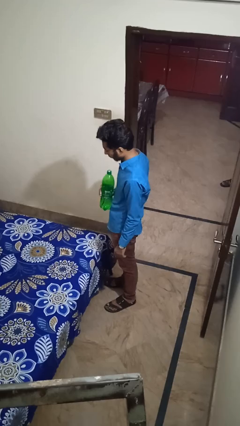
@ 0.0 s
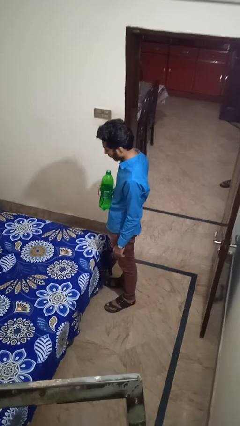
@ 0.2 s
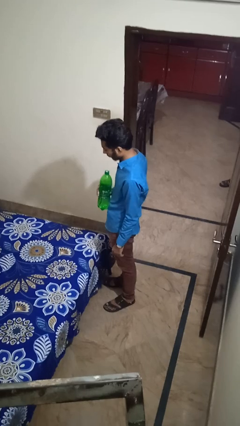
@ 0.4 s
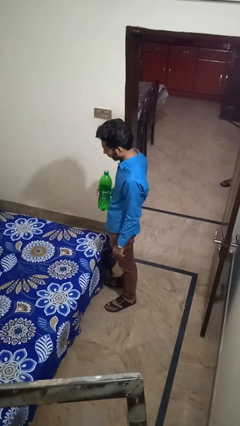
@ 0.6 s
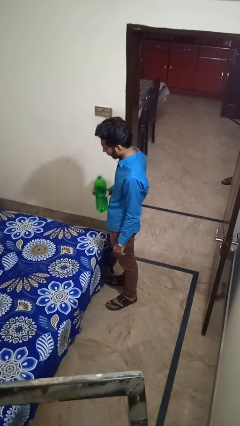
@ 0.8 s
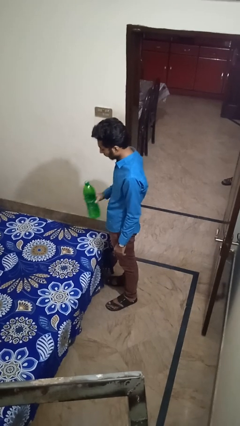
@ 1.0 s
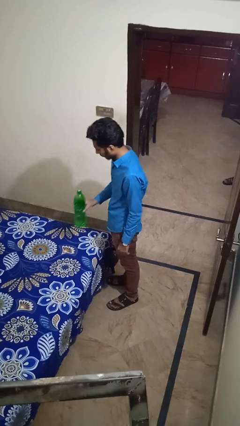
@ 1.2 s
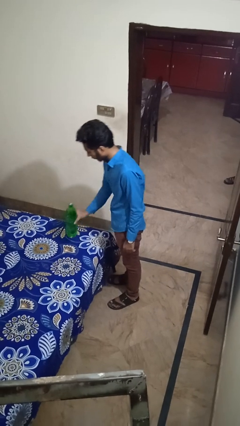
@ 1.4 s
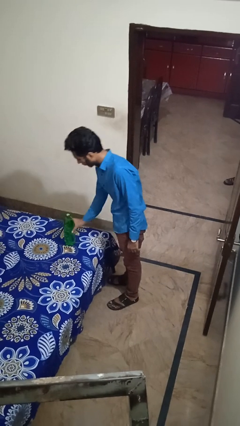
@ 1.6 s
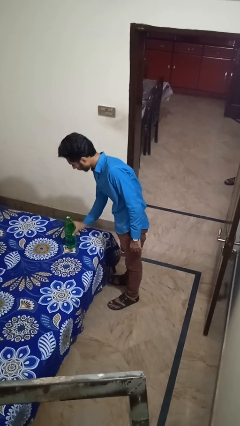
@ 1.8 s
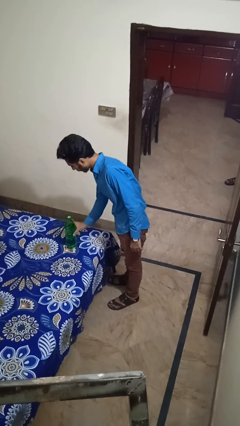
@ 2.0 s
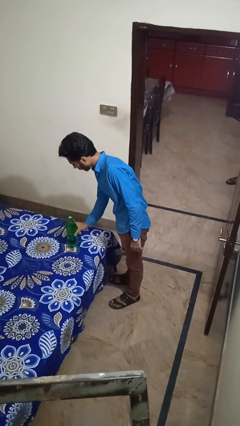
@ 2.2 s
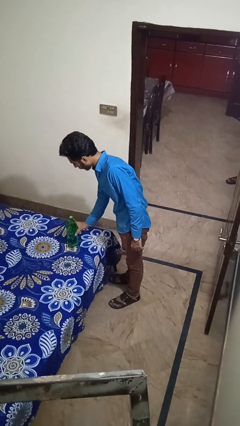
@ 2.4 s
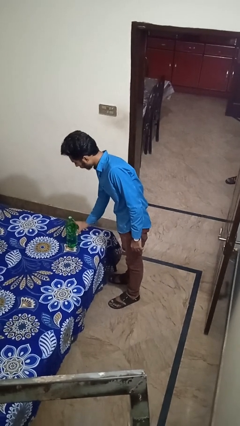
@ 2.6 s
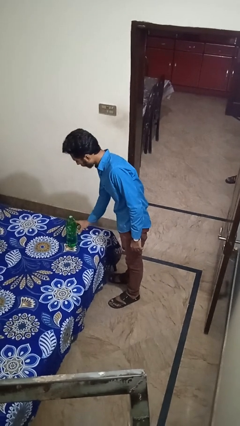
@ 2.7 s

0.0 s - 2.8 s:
person puts down object on bed

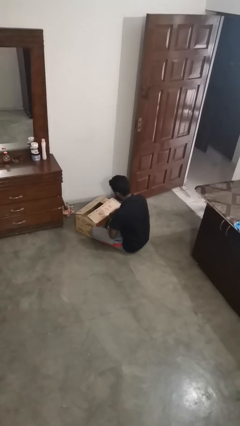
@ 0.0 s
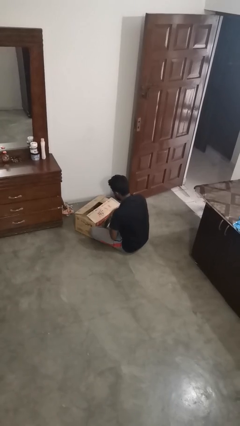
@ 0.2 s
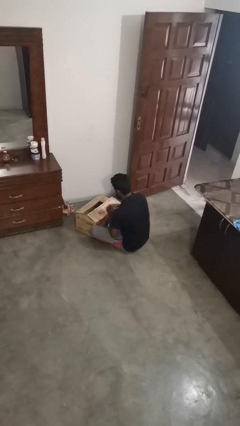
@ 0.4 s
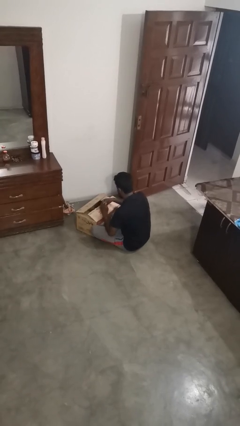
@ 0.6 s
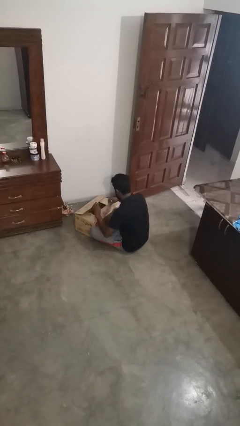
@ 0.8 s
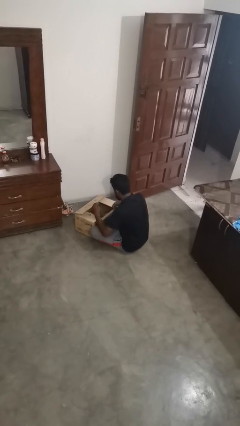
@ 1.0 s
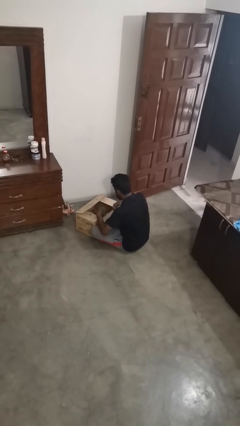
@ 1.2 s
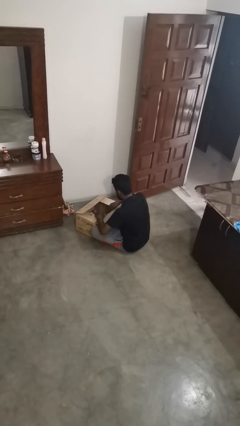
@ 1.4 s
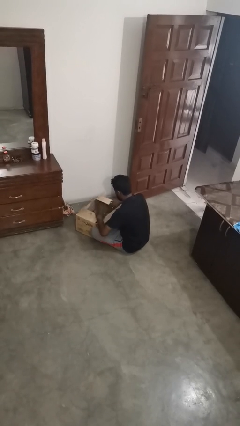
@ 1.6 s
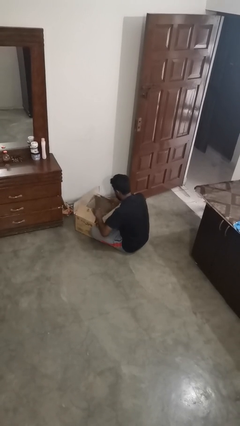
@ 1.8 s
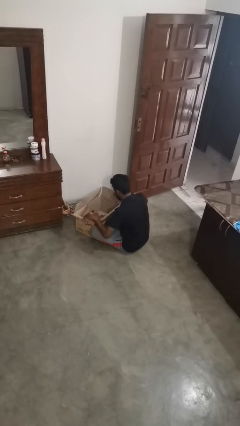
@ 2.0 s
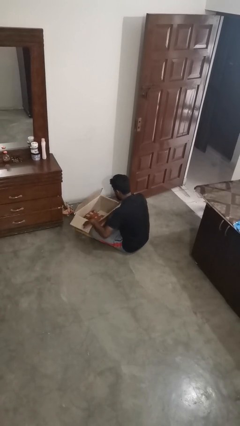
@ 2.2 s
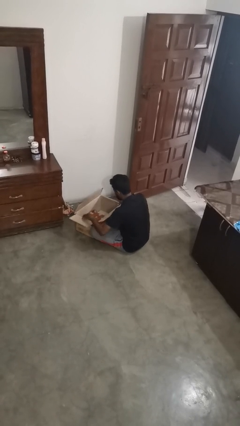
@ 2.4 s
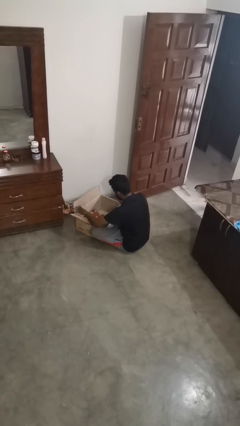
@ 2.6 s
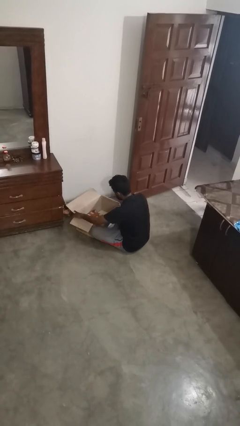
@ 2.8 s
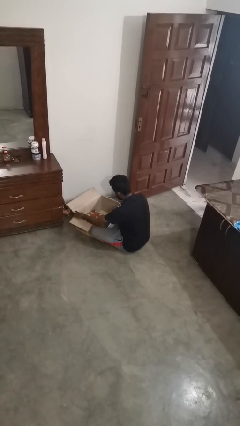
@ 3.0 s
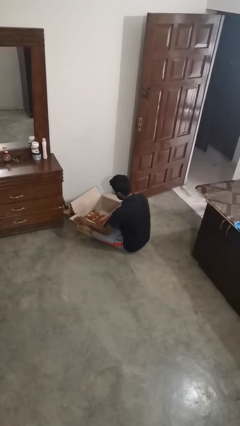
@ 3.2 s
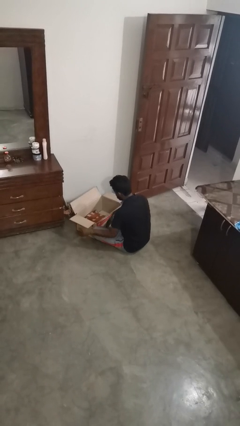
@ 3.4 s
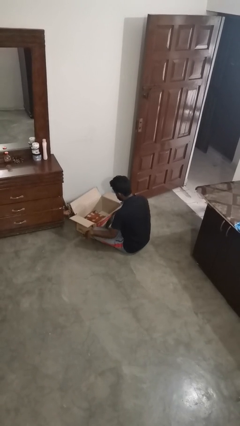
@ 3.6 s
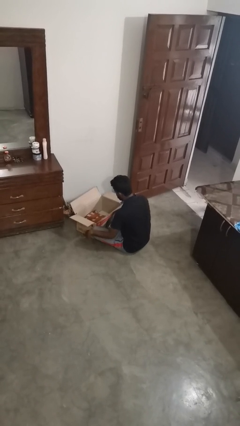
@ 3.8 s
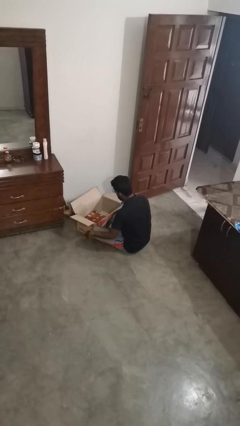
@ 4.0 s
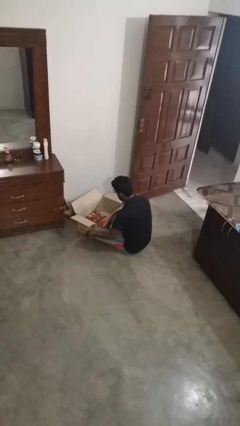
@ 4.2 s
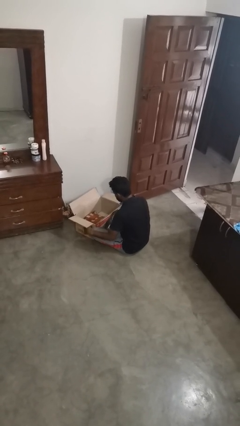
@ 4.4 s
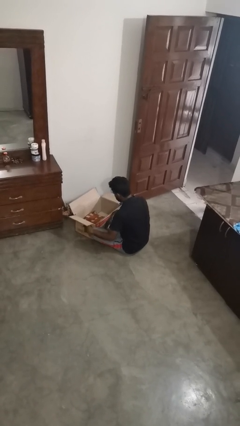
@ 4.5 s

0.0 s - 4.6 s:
person opens box

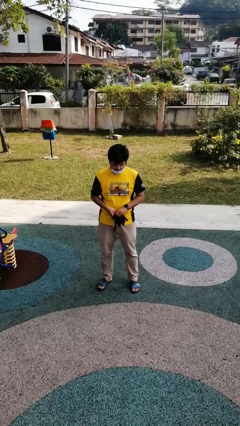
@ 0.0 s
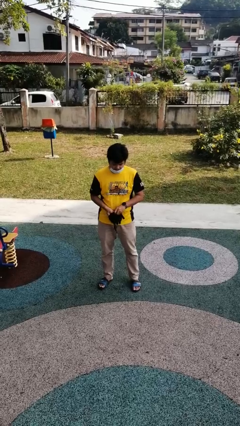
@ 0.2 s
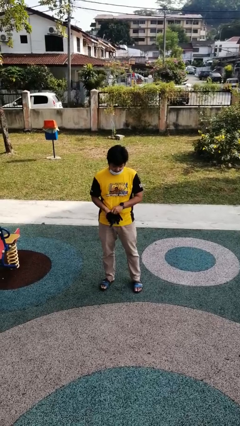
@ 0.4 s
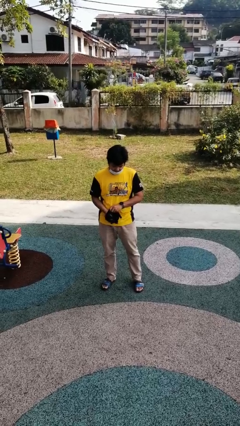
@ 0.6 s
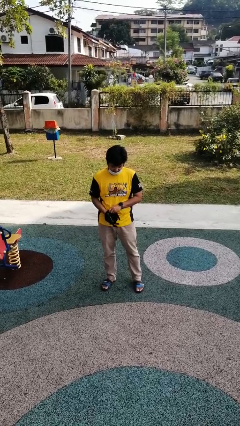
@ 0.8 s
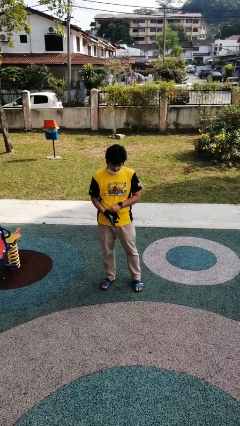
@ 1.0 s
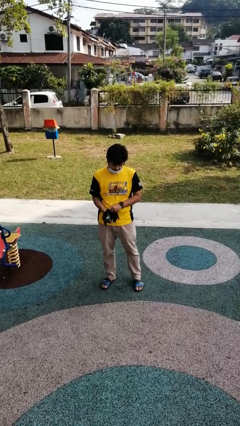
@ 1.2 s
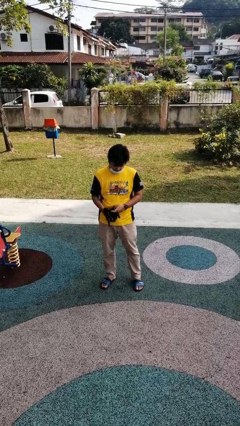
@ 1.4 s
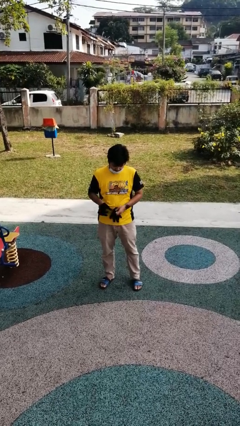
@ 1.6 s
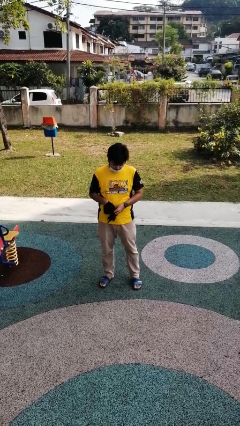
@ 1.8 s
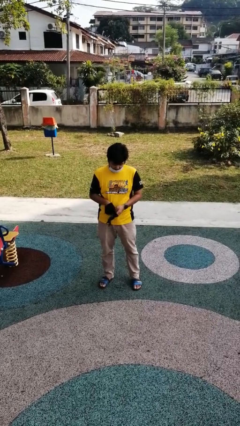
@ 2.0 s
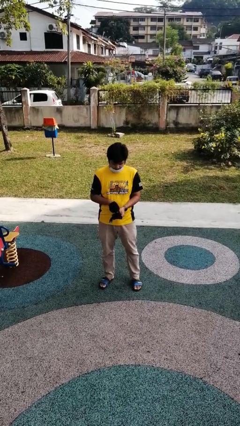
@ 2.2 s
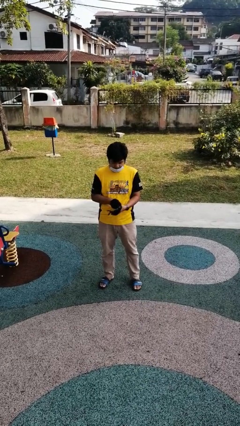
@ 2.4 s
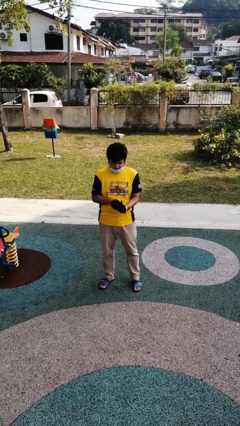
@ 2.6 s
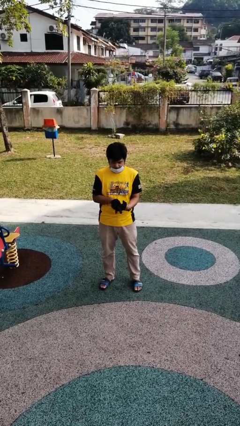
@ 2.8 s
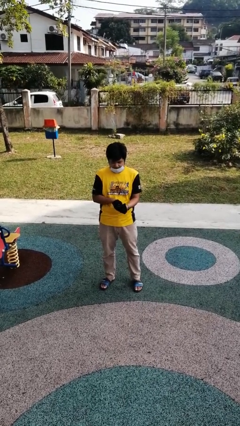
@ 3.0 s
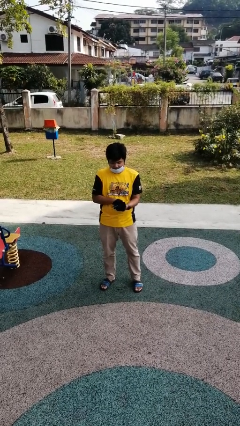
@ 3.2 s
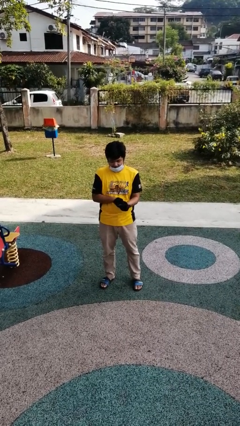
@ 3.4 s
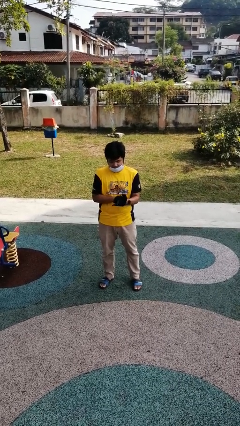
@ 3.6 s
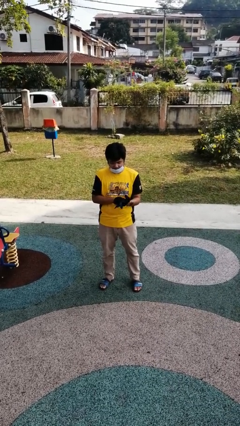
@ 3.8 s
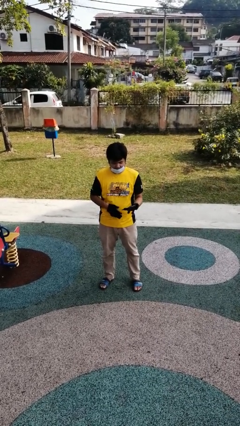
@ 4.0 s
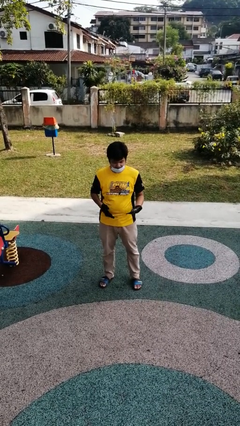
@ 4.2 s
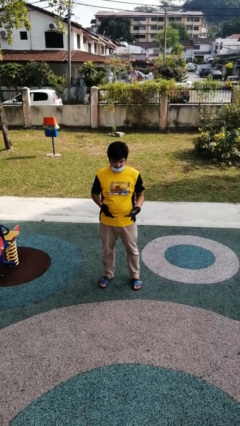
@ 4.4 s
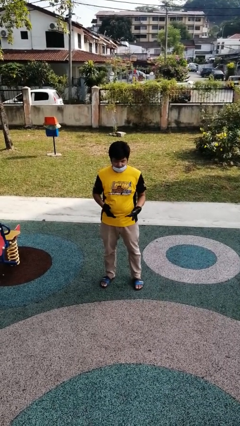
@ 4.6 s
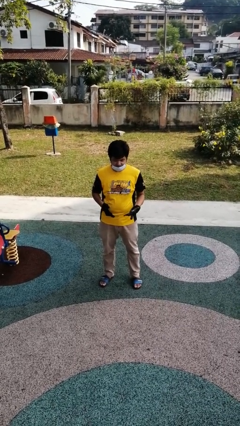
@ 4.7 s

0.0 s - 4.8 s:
person puts on gloves

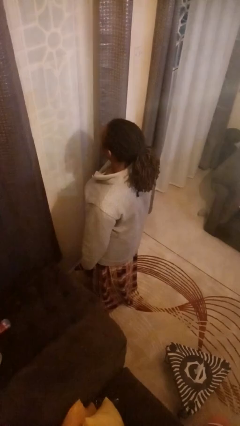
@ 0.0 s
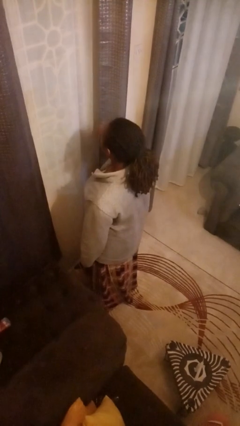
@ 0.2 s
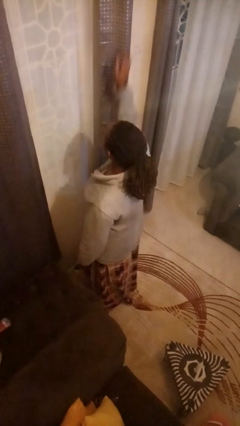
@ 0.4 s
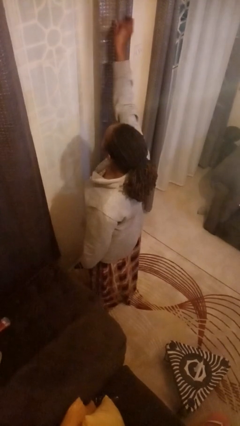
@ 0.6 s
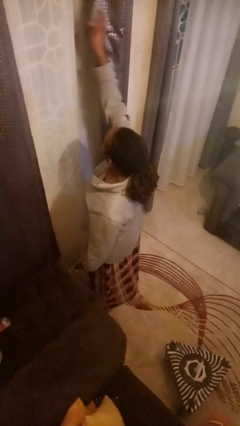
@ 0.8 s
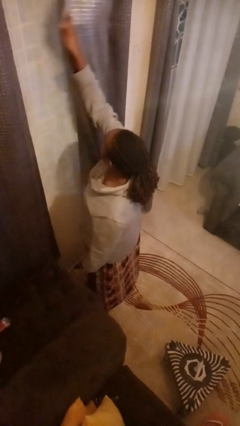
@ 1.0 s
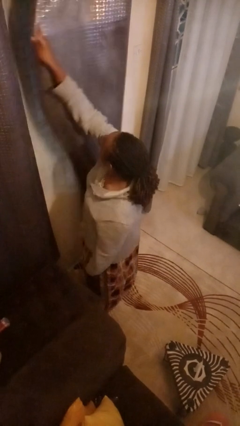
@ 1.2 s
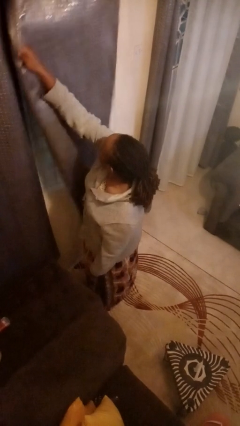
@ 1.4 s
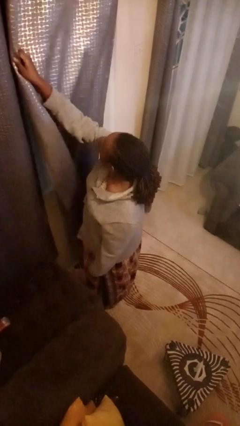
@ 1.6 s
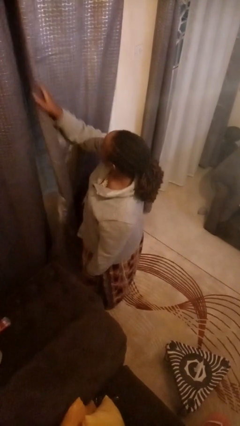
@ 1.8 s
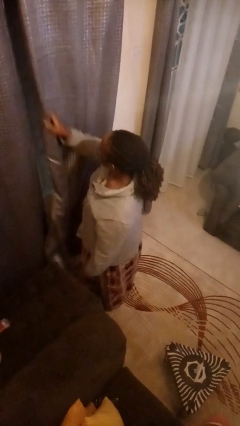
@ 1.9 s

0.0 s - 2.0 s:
person closes curtains

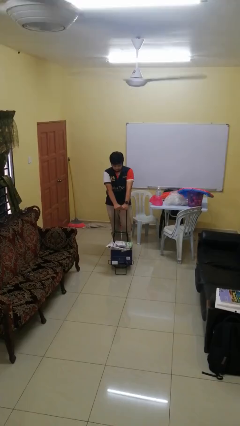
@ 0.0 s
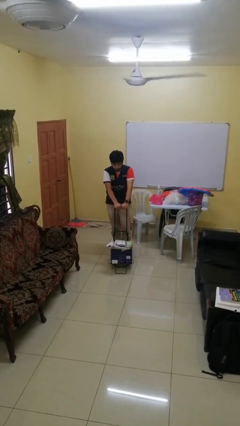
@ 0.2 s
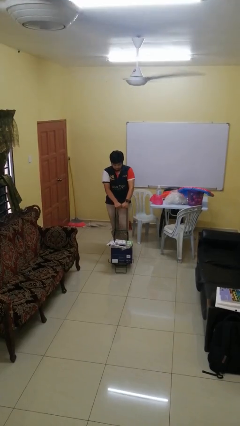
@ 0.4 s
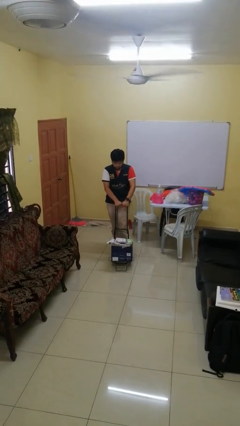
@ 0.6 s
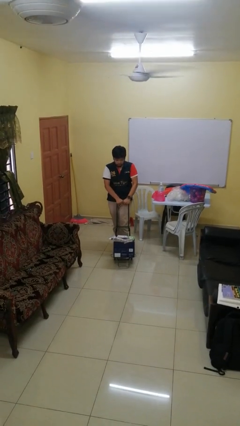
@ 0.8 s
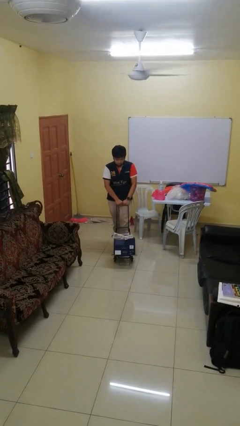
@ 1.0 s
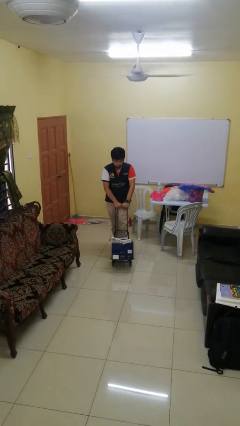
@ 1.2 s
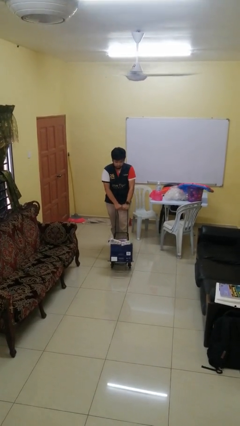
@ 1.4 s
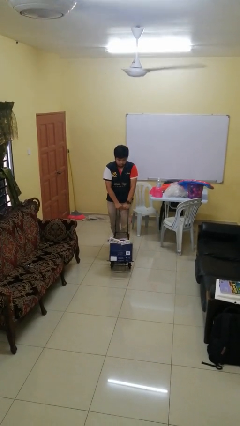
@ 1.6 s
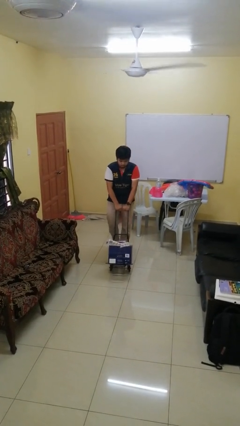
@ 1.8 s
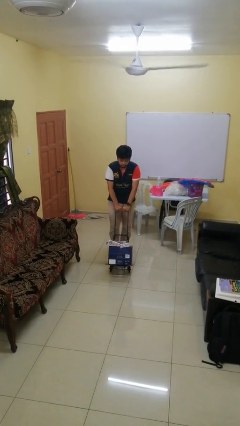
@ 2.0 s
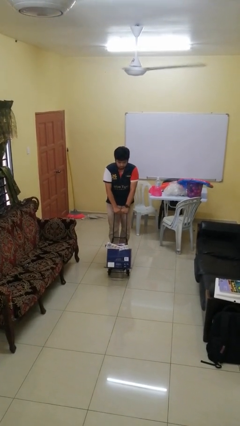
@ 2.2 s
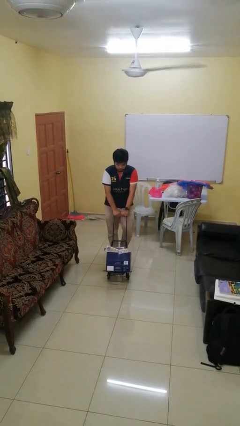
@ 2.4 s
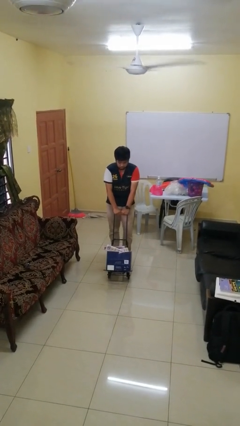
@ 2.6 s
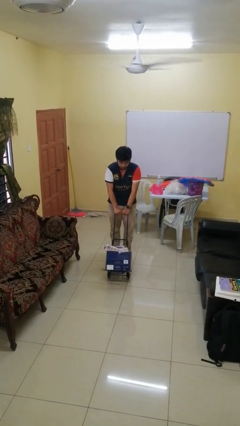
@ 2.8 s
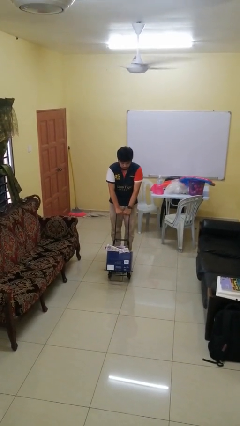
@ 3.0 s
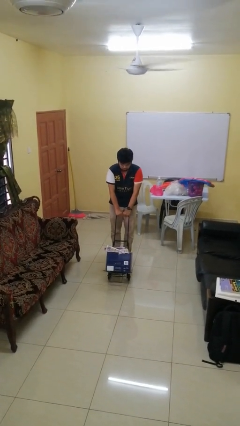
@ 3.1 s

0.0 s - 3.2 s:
person pushes wheeled cart
